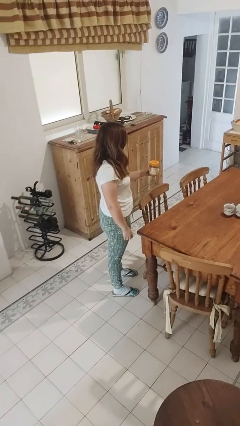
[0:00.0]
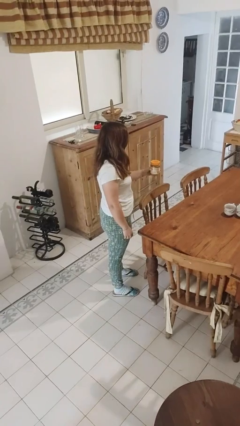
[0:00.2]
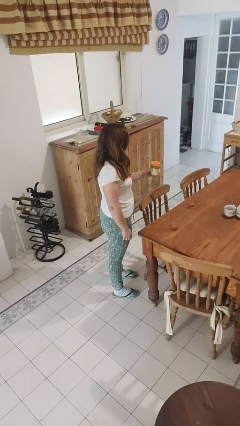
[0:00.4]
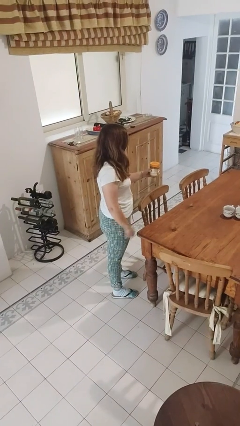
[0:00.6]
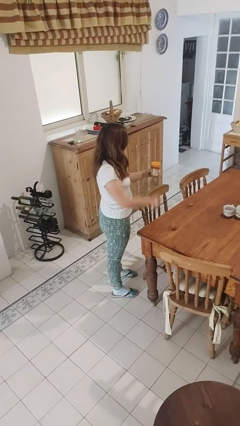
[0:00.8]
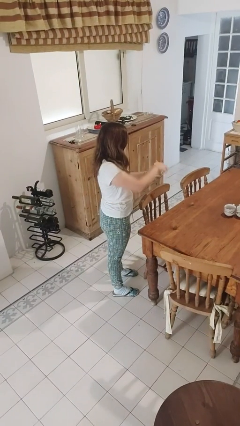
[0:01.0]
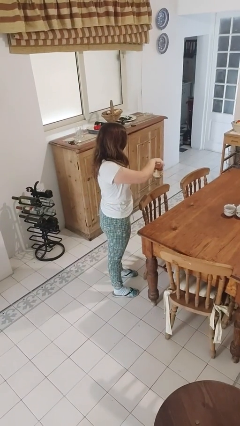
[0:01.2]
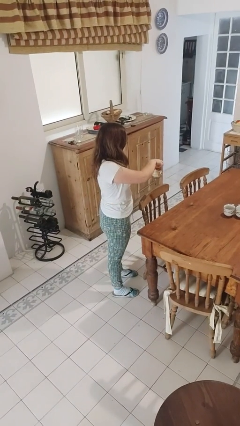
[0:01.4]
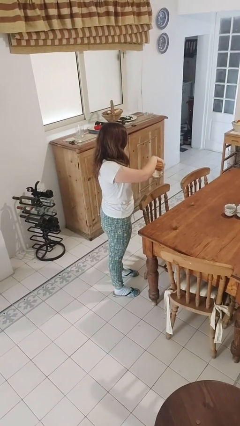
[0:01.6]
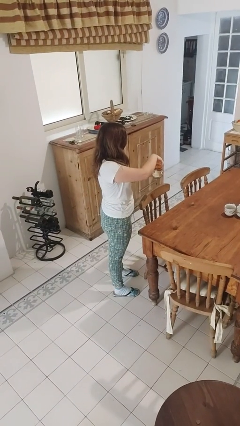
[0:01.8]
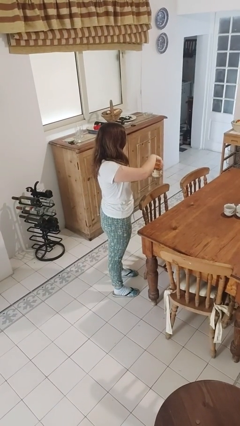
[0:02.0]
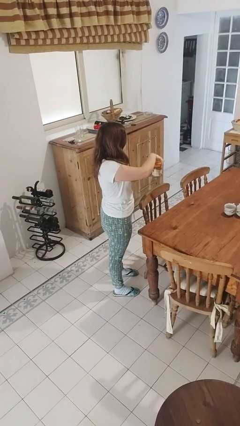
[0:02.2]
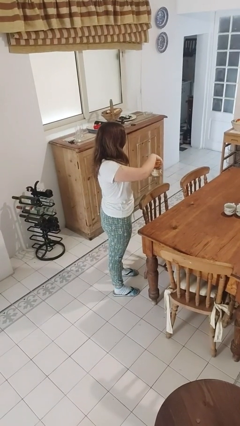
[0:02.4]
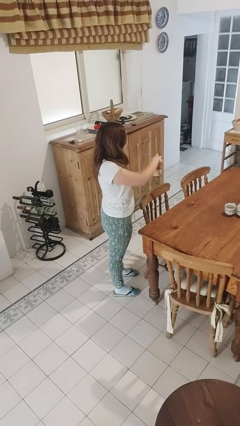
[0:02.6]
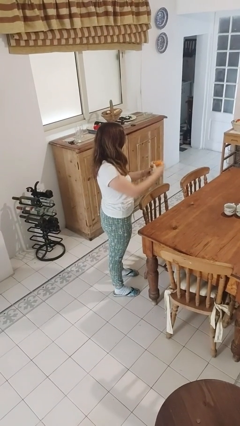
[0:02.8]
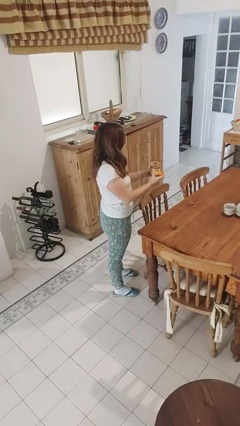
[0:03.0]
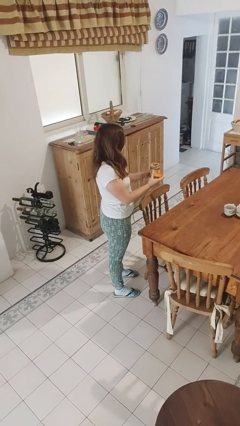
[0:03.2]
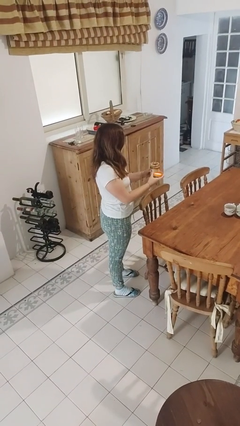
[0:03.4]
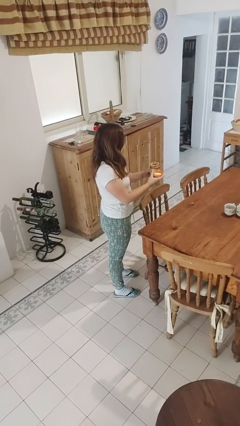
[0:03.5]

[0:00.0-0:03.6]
person opens jar

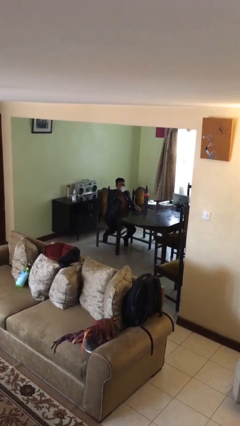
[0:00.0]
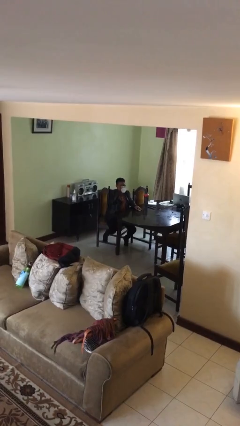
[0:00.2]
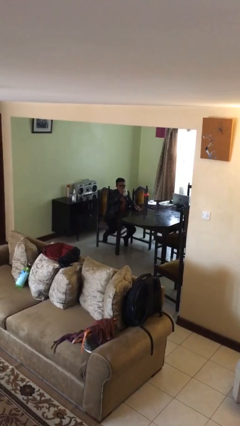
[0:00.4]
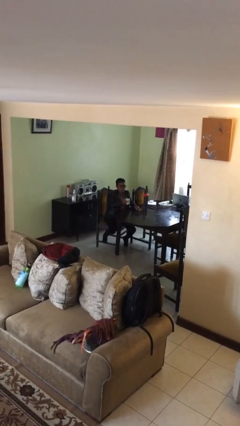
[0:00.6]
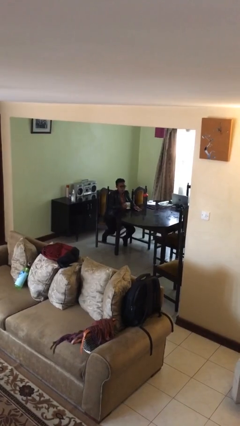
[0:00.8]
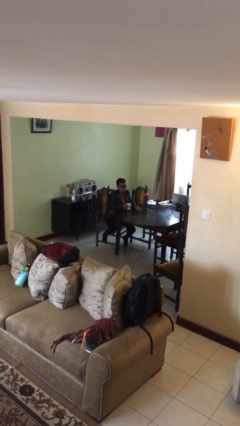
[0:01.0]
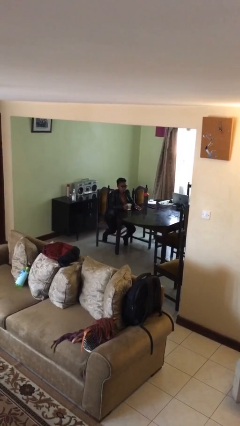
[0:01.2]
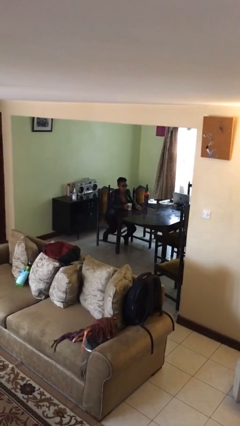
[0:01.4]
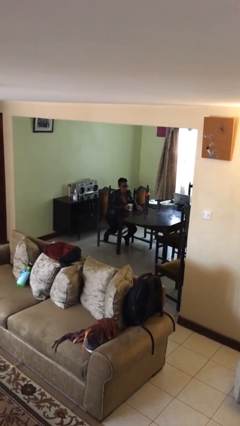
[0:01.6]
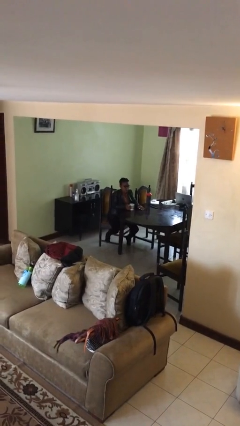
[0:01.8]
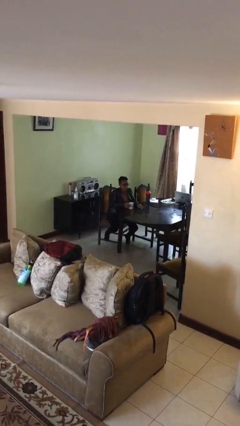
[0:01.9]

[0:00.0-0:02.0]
person puts down object on table

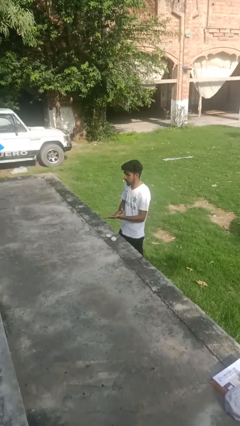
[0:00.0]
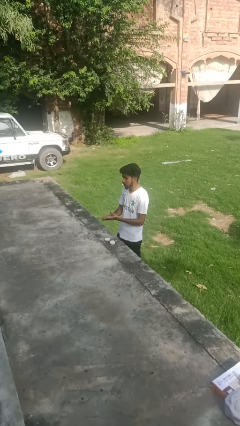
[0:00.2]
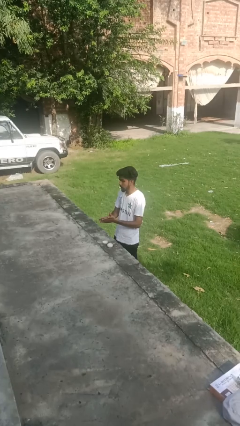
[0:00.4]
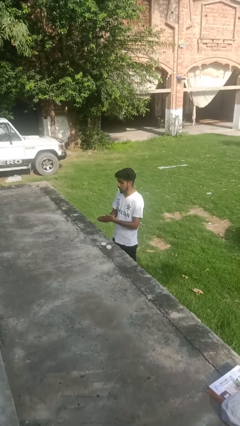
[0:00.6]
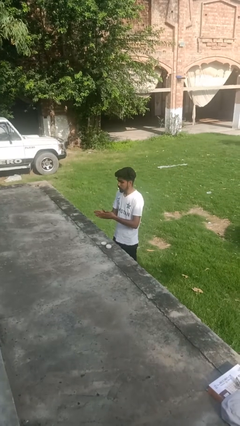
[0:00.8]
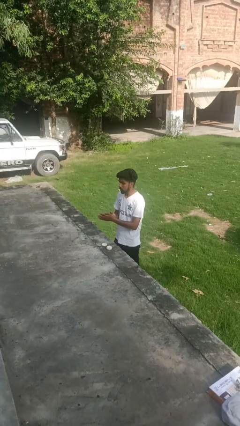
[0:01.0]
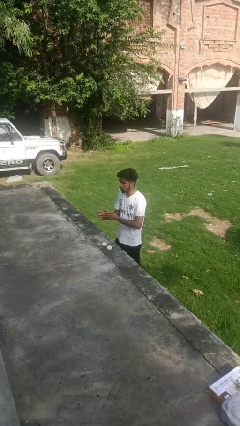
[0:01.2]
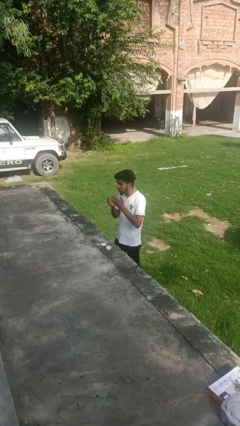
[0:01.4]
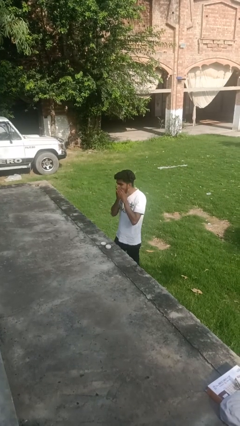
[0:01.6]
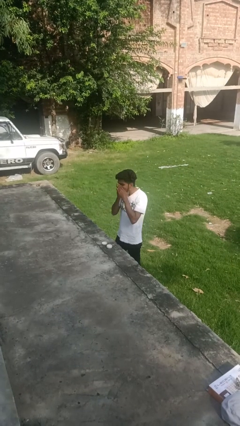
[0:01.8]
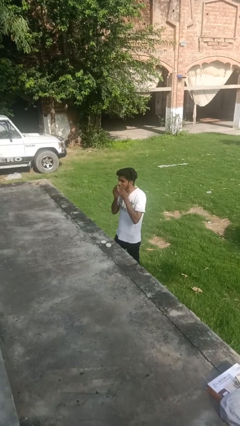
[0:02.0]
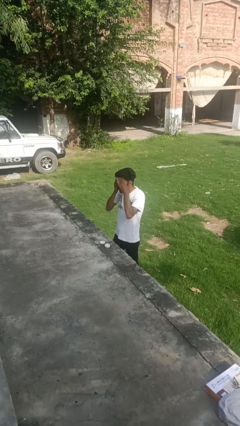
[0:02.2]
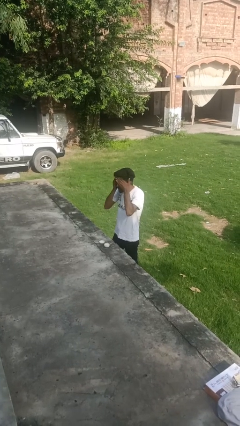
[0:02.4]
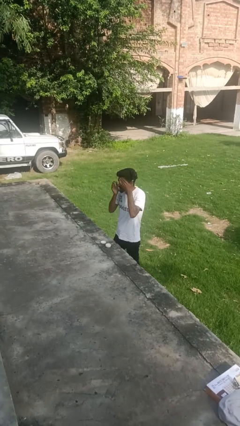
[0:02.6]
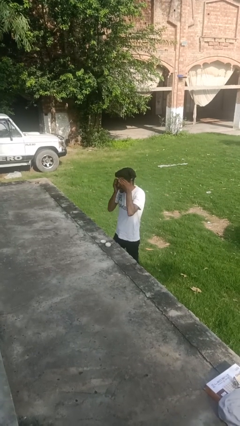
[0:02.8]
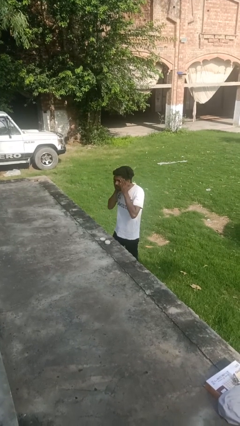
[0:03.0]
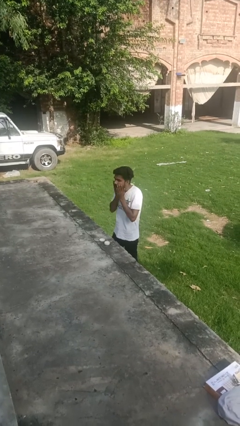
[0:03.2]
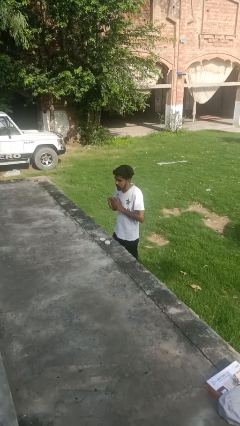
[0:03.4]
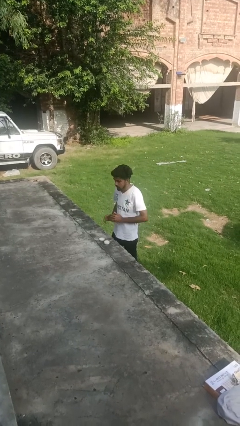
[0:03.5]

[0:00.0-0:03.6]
person applies facial moisturizer

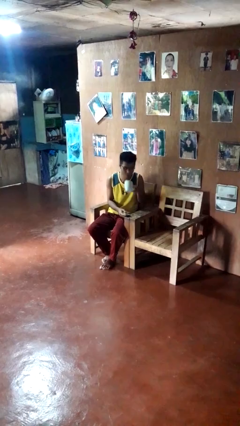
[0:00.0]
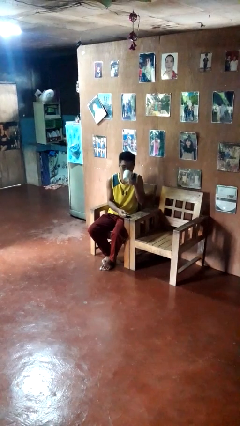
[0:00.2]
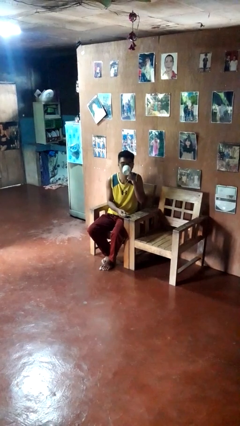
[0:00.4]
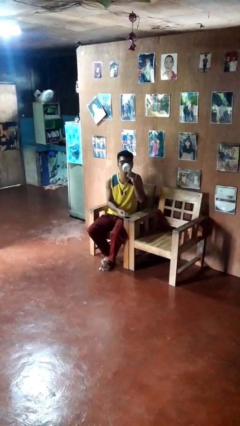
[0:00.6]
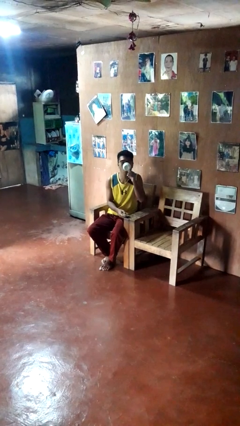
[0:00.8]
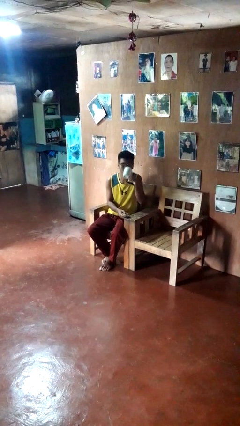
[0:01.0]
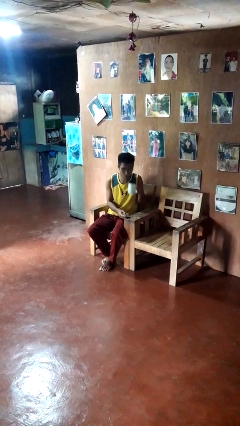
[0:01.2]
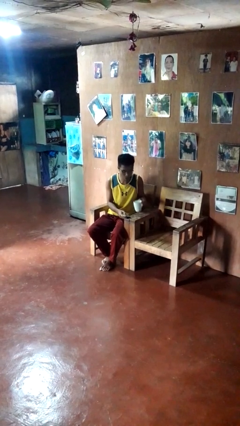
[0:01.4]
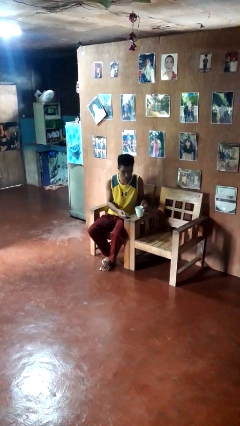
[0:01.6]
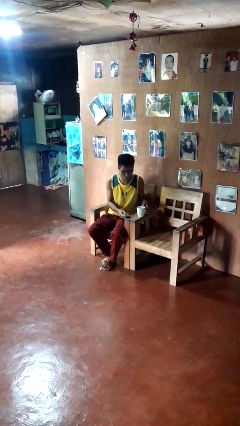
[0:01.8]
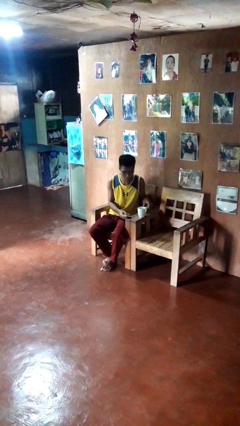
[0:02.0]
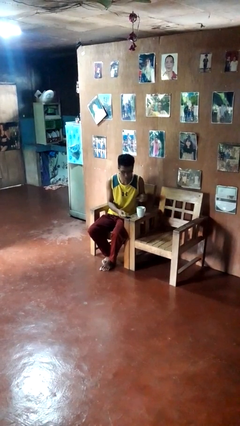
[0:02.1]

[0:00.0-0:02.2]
person drinks from cup

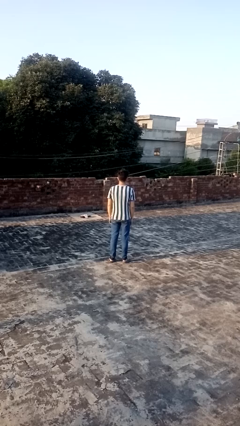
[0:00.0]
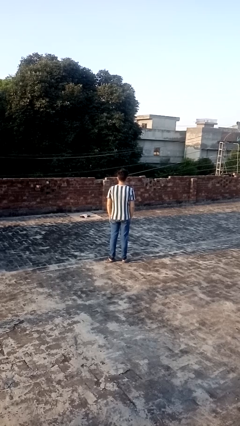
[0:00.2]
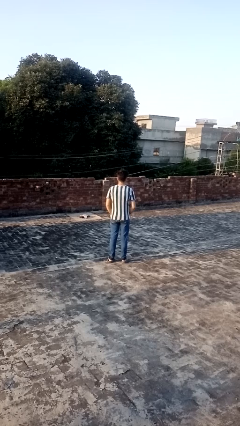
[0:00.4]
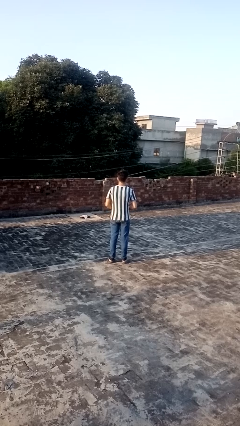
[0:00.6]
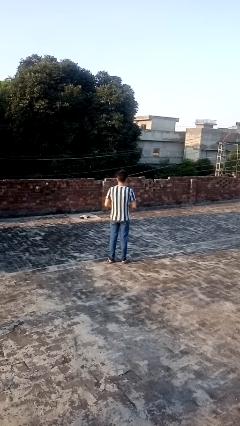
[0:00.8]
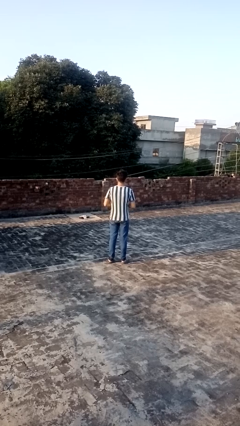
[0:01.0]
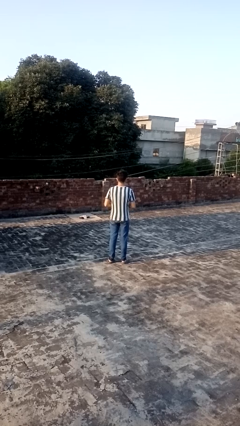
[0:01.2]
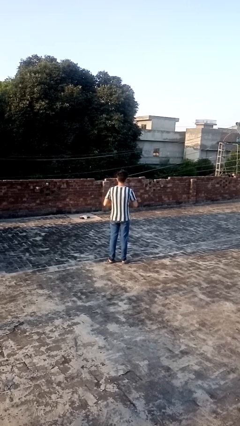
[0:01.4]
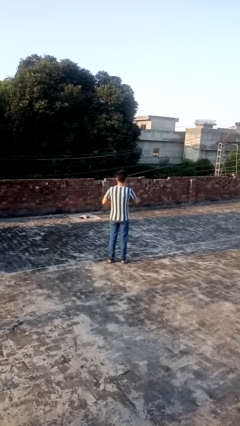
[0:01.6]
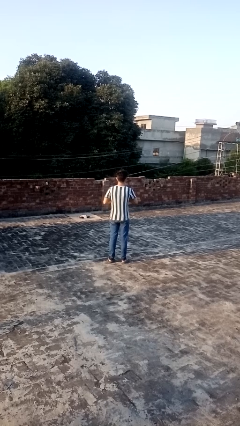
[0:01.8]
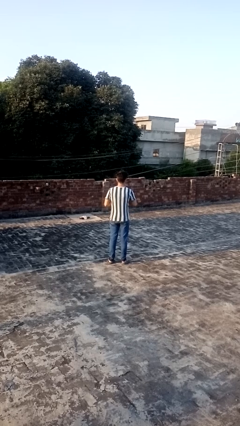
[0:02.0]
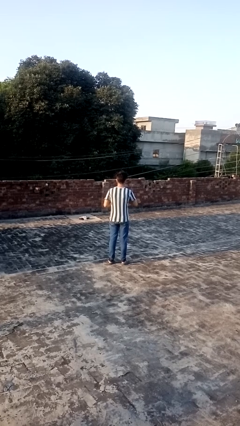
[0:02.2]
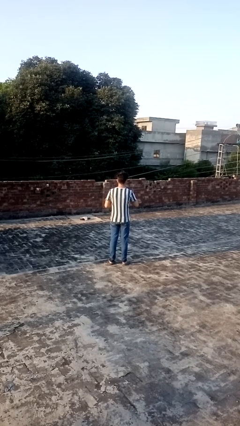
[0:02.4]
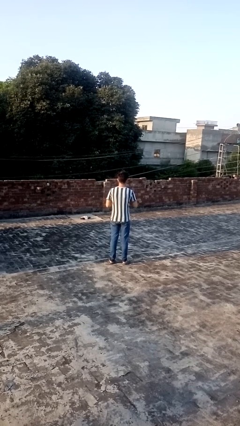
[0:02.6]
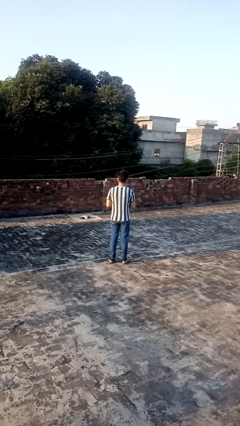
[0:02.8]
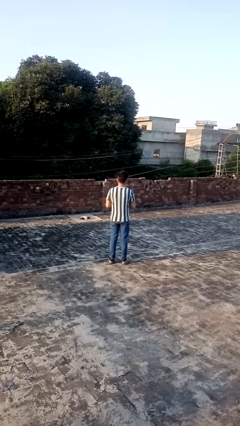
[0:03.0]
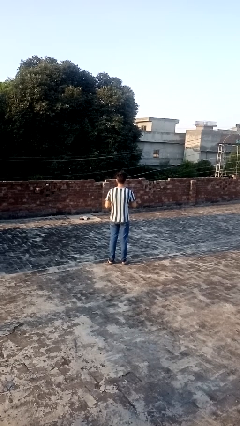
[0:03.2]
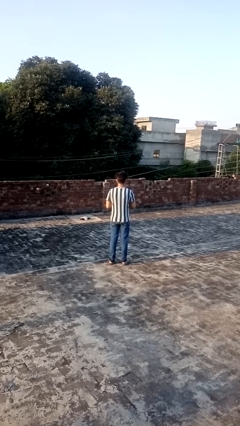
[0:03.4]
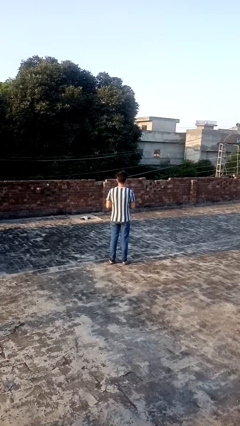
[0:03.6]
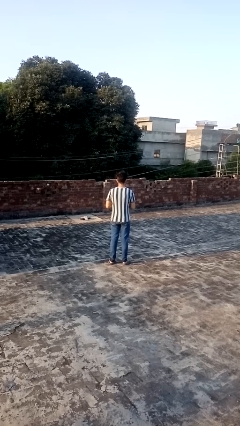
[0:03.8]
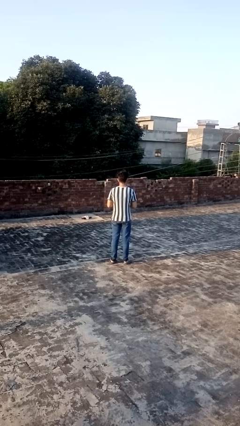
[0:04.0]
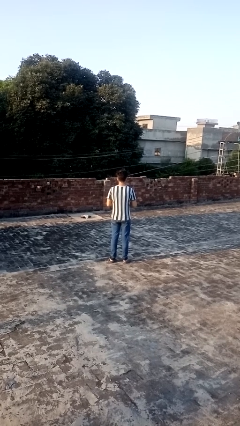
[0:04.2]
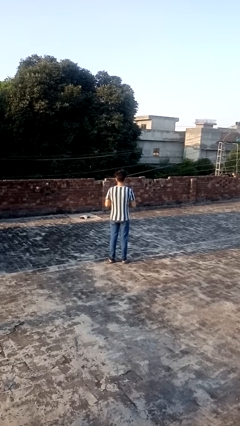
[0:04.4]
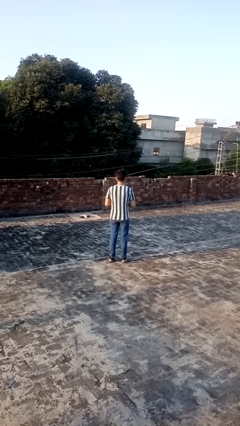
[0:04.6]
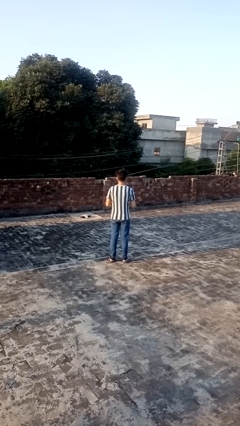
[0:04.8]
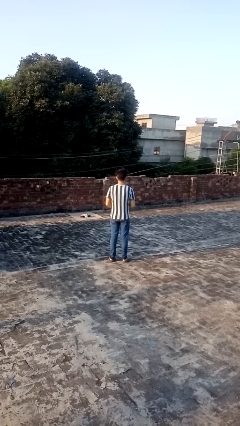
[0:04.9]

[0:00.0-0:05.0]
person cracks knuckles

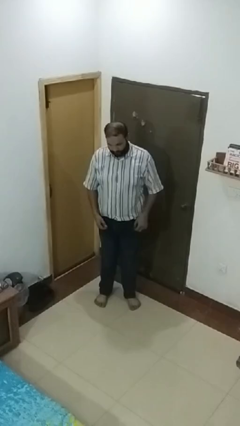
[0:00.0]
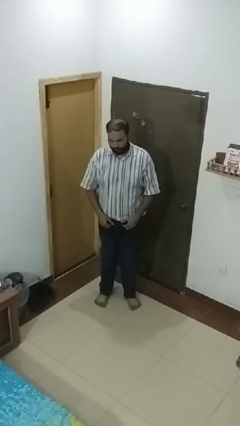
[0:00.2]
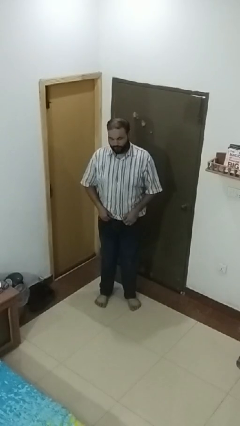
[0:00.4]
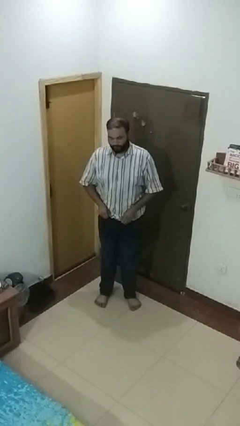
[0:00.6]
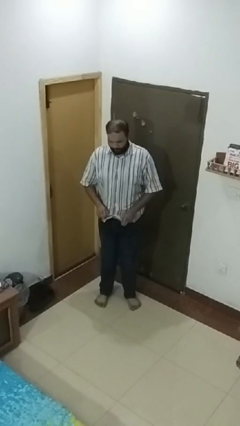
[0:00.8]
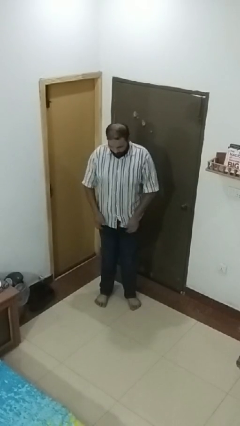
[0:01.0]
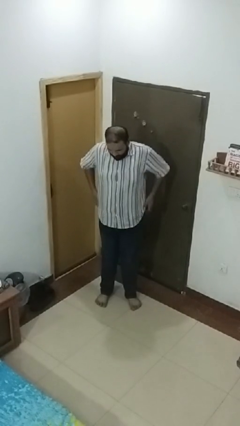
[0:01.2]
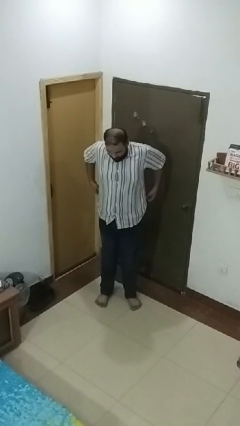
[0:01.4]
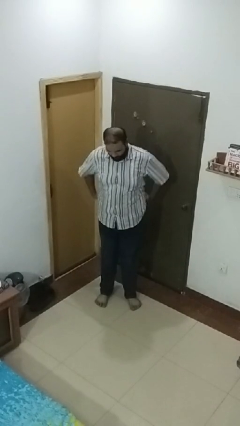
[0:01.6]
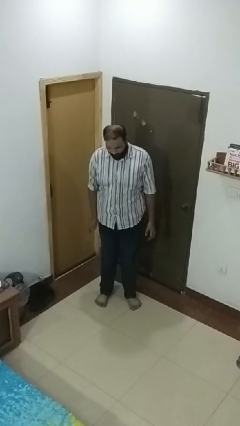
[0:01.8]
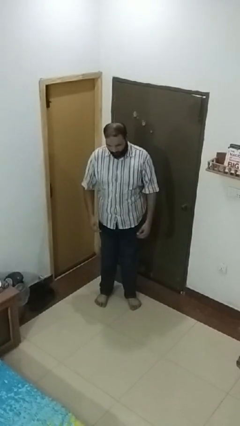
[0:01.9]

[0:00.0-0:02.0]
person untucks shirt
